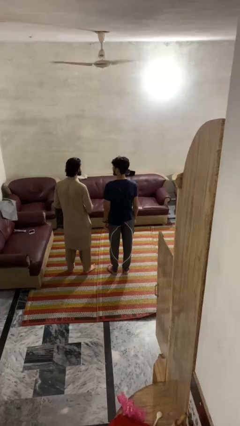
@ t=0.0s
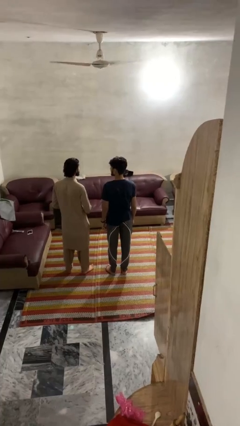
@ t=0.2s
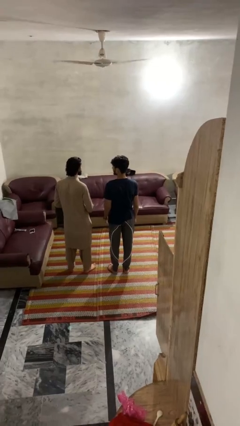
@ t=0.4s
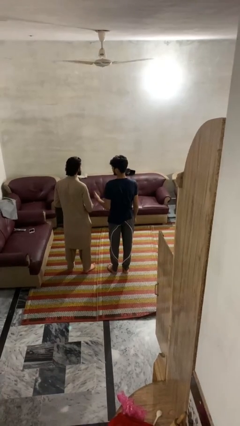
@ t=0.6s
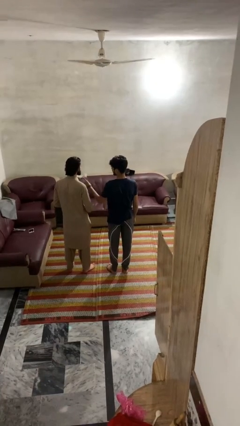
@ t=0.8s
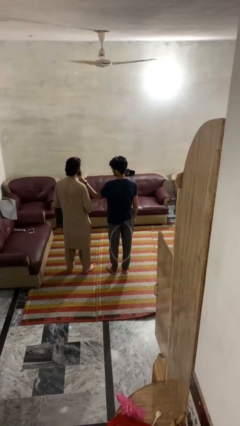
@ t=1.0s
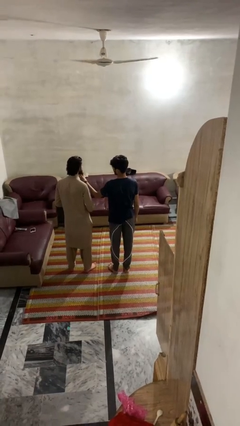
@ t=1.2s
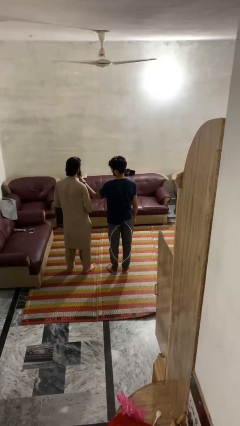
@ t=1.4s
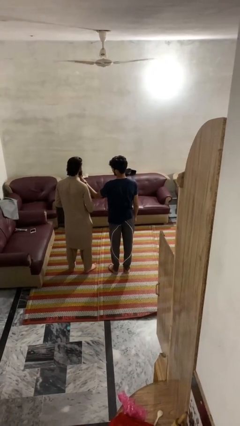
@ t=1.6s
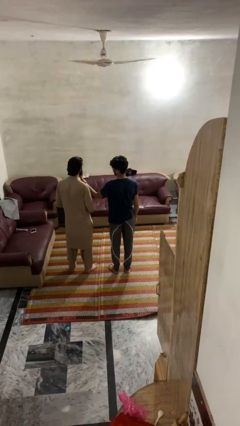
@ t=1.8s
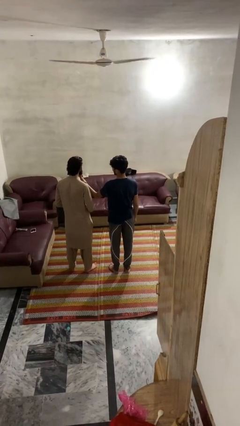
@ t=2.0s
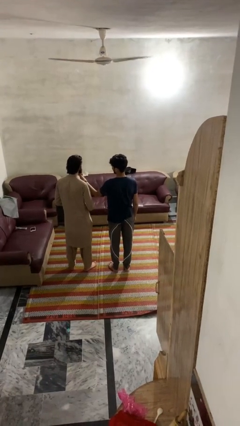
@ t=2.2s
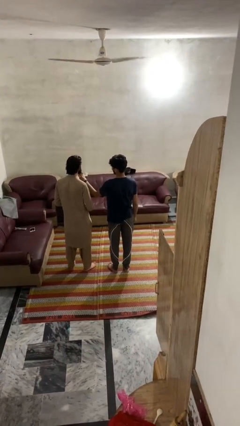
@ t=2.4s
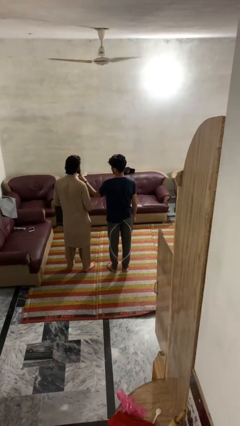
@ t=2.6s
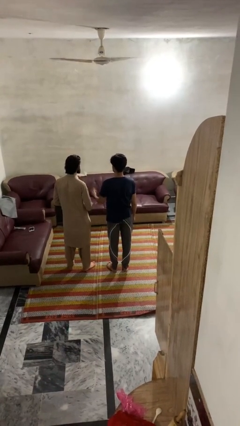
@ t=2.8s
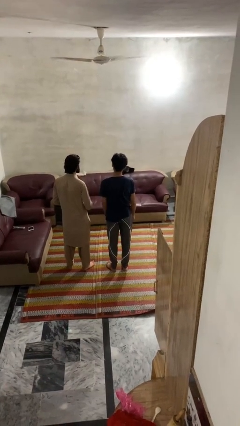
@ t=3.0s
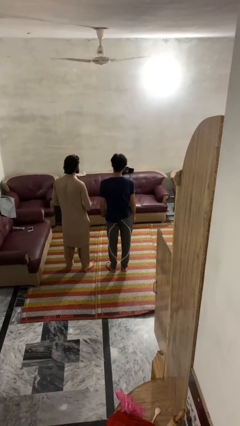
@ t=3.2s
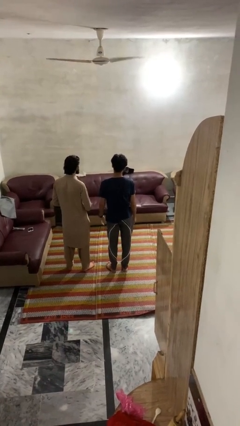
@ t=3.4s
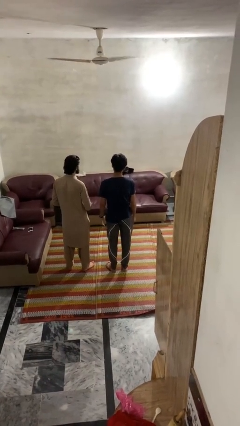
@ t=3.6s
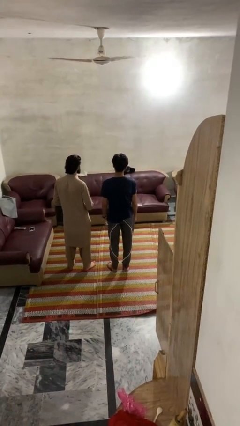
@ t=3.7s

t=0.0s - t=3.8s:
person touches face of person

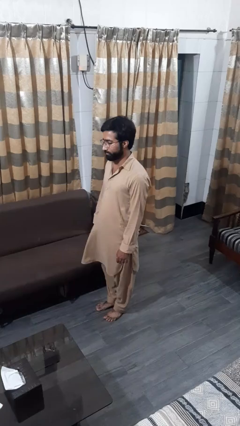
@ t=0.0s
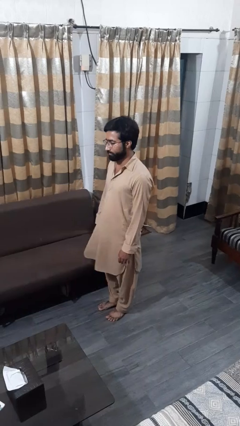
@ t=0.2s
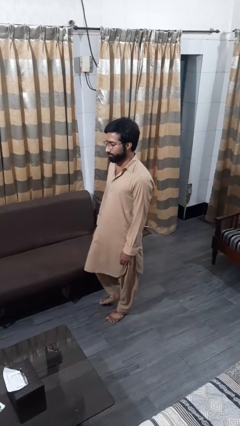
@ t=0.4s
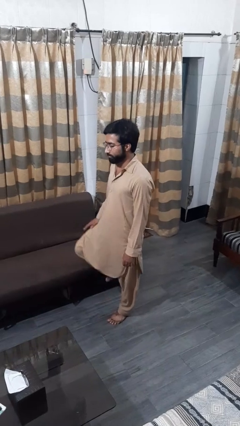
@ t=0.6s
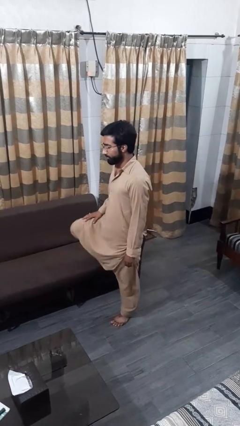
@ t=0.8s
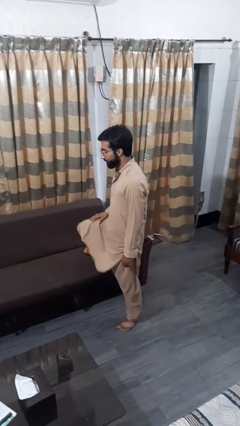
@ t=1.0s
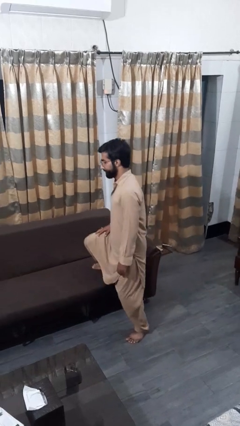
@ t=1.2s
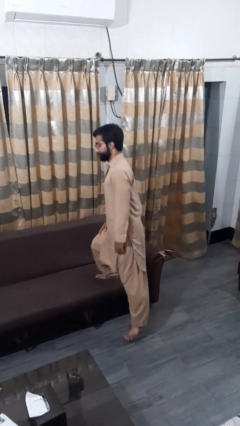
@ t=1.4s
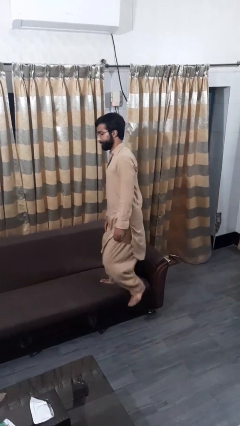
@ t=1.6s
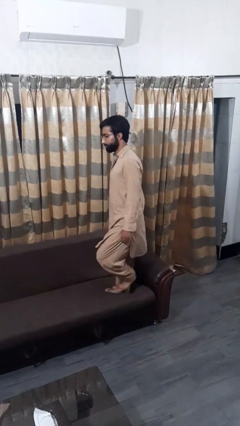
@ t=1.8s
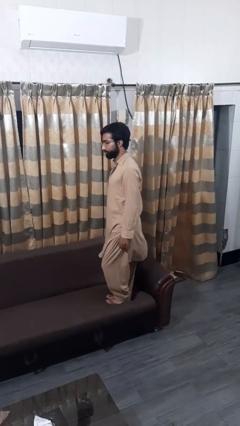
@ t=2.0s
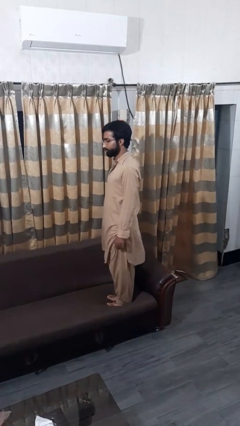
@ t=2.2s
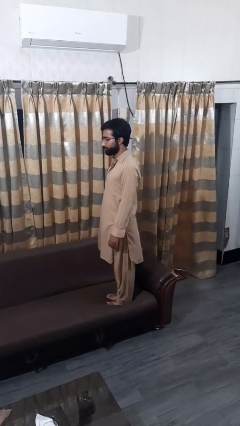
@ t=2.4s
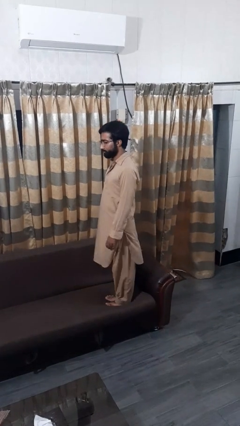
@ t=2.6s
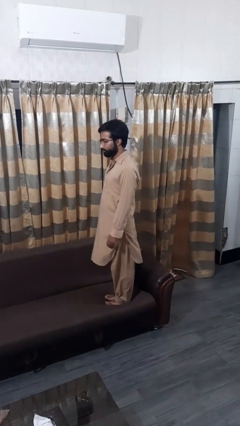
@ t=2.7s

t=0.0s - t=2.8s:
person climbs on couch

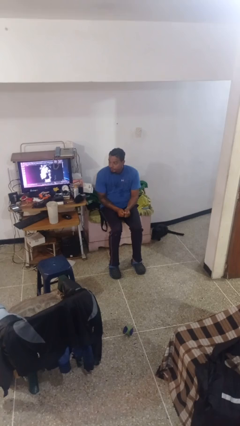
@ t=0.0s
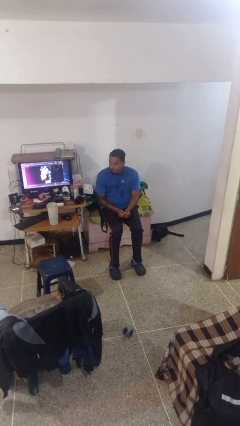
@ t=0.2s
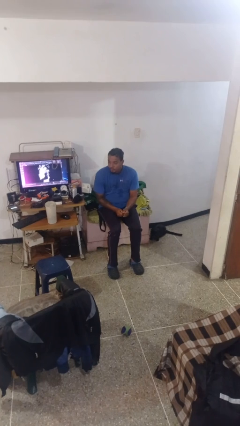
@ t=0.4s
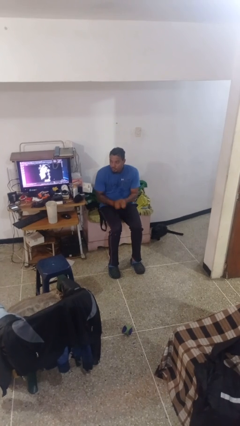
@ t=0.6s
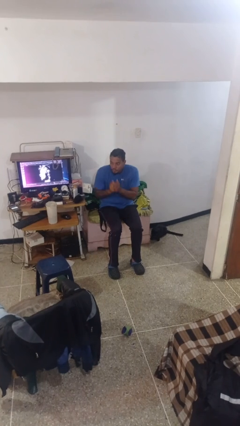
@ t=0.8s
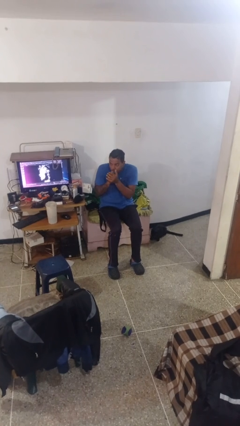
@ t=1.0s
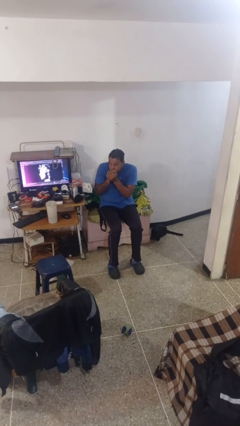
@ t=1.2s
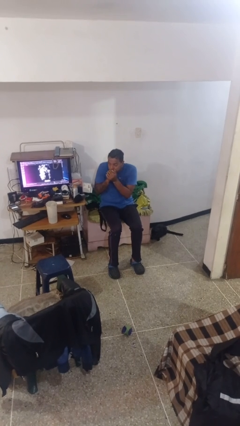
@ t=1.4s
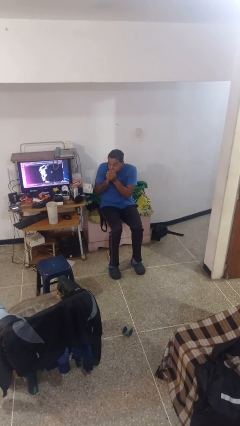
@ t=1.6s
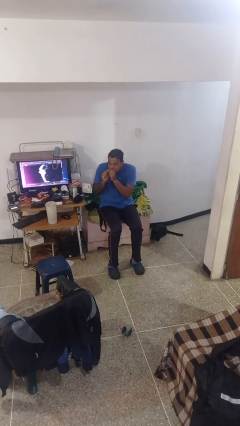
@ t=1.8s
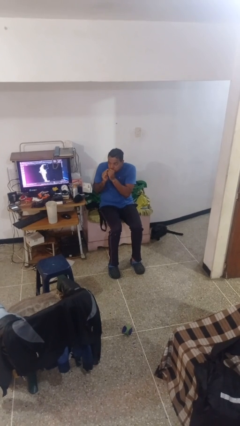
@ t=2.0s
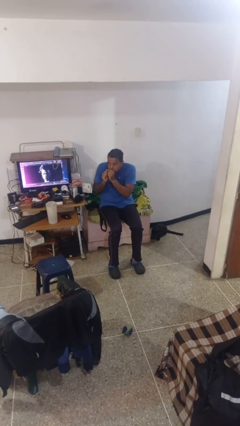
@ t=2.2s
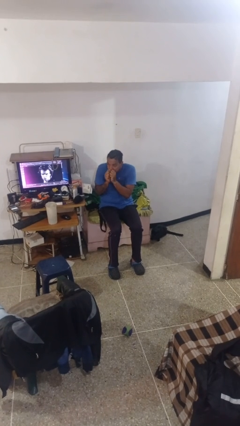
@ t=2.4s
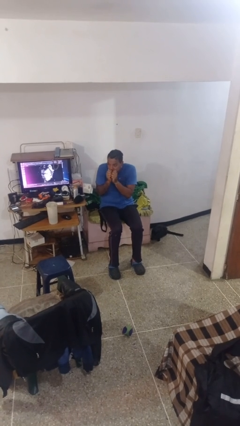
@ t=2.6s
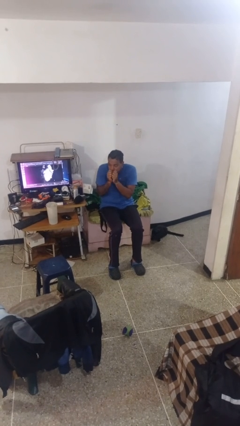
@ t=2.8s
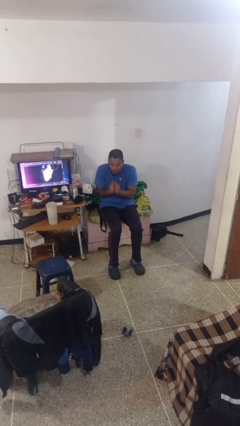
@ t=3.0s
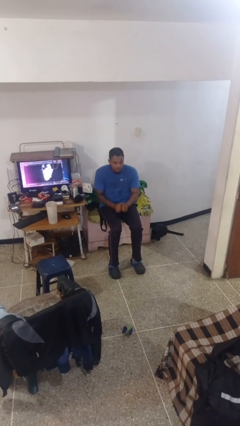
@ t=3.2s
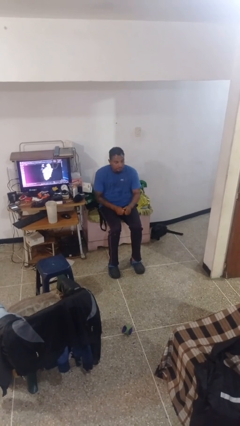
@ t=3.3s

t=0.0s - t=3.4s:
person blows into hands

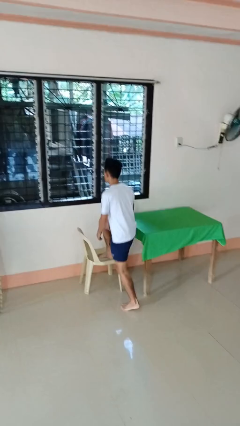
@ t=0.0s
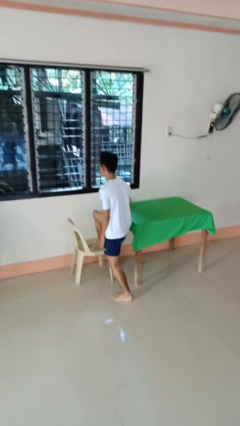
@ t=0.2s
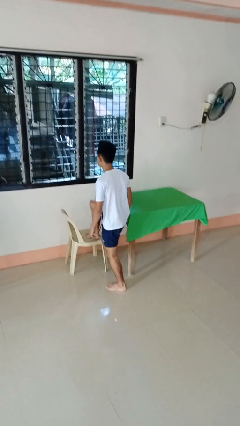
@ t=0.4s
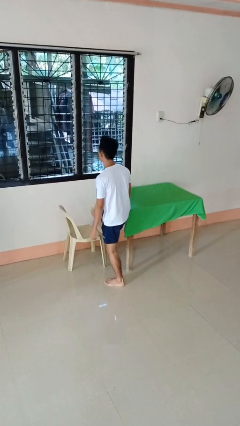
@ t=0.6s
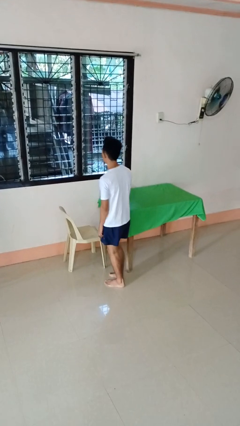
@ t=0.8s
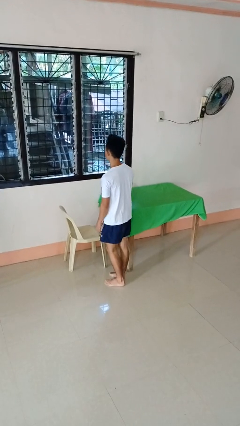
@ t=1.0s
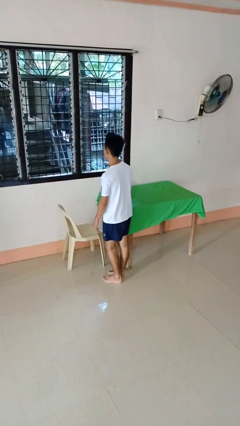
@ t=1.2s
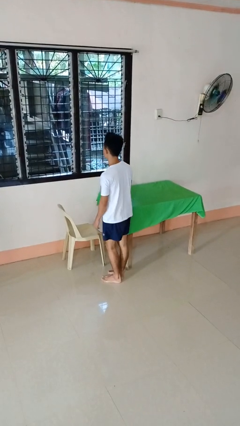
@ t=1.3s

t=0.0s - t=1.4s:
person climbs off chair

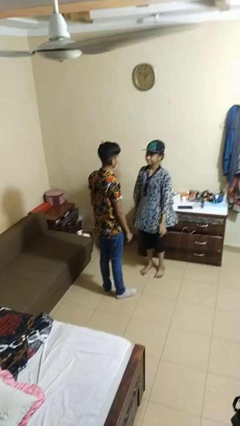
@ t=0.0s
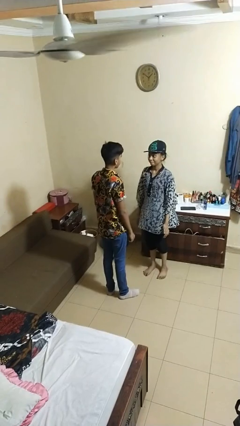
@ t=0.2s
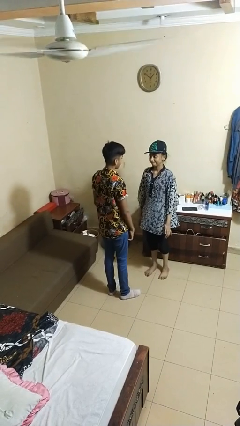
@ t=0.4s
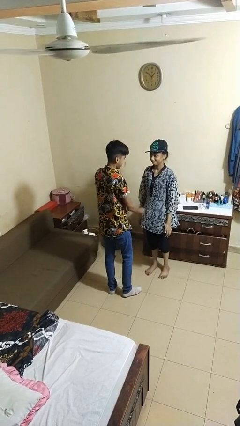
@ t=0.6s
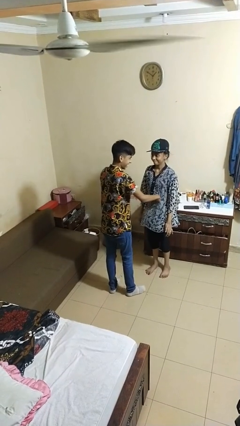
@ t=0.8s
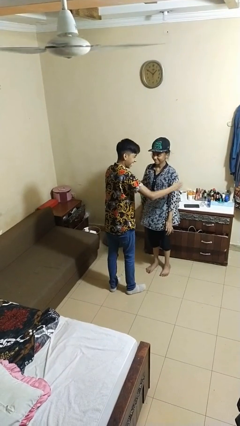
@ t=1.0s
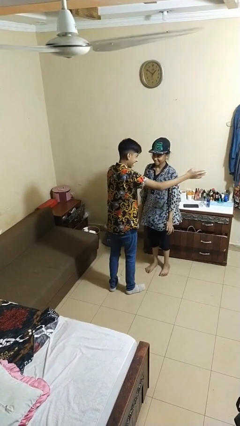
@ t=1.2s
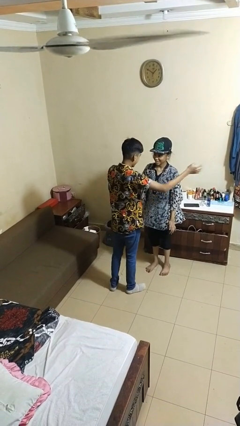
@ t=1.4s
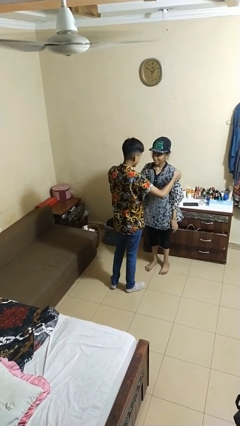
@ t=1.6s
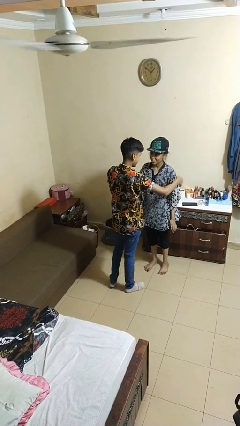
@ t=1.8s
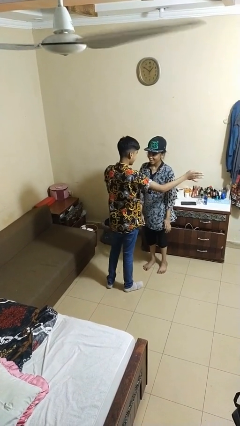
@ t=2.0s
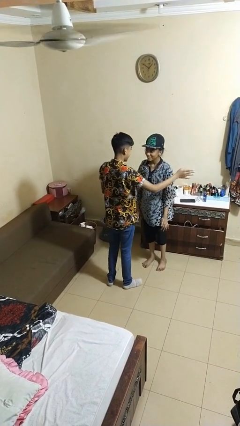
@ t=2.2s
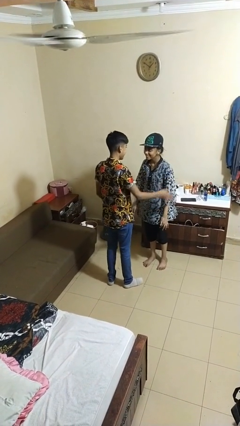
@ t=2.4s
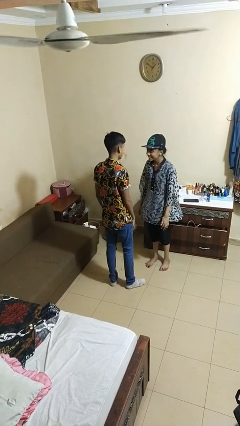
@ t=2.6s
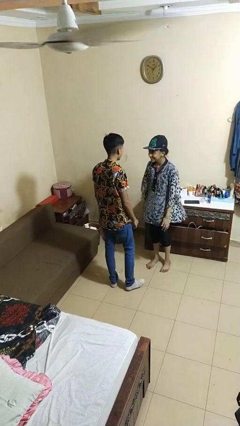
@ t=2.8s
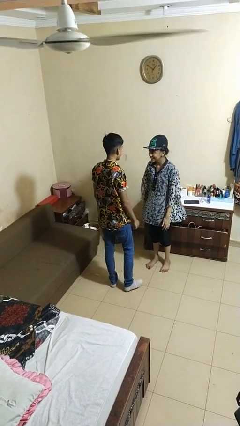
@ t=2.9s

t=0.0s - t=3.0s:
person shoves person

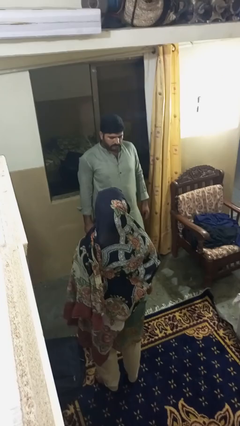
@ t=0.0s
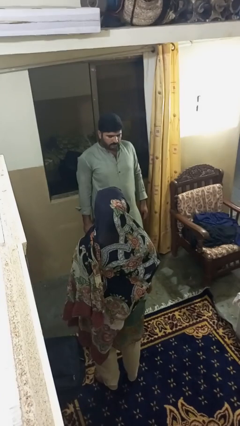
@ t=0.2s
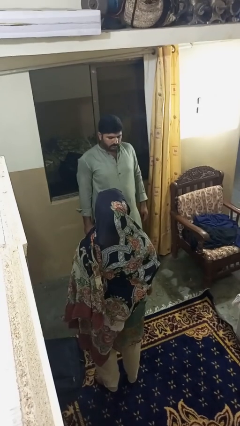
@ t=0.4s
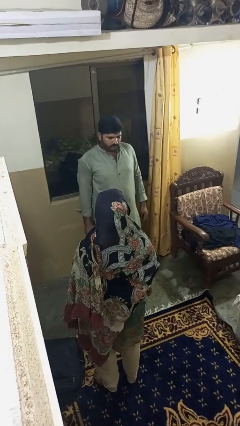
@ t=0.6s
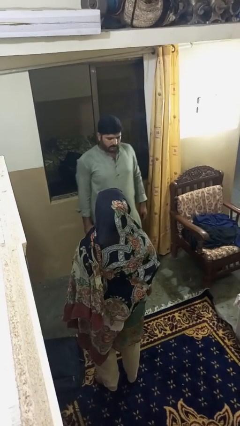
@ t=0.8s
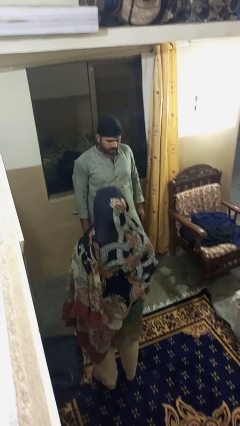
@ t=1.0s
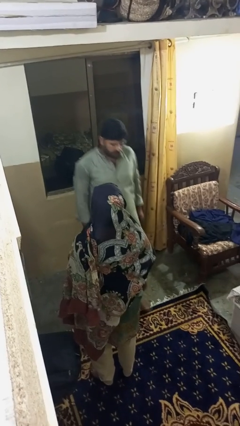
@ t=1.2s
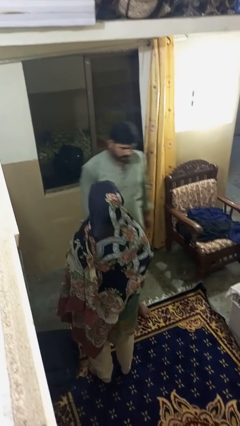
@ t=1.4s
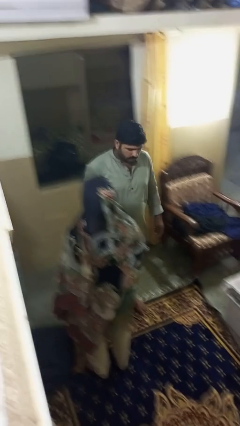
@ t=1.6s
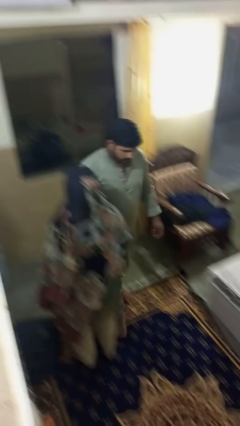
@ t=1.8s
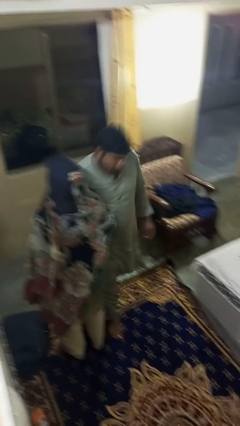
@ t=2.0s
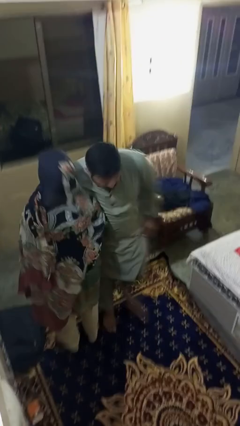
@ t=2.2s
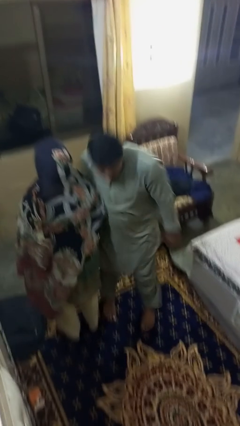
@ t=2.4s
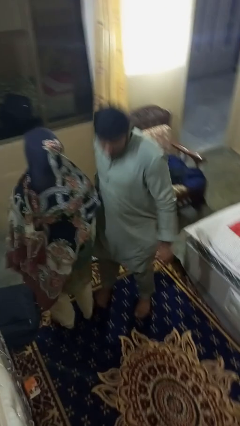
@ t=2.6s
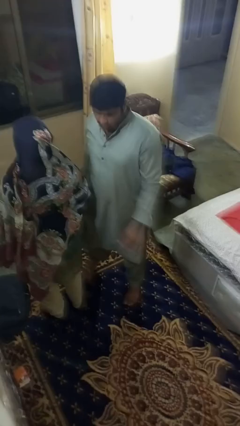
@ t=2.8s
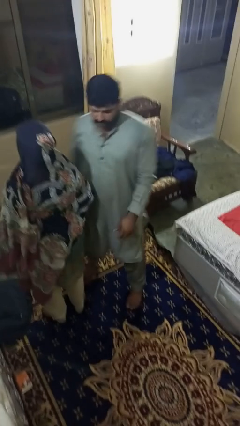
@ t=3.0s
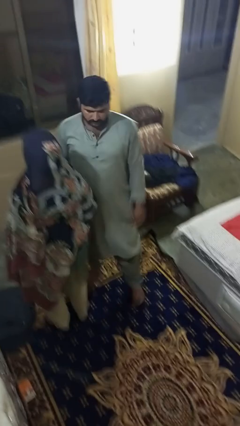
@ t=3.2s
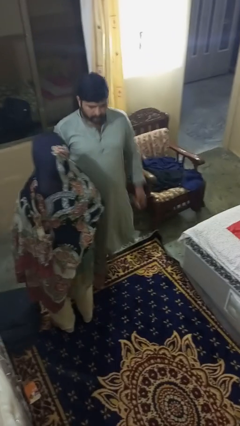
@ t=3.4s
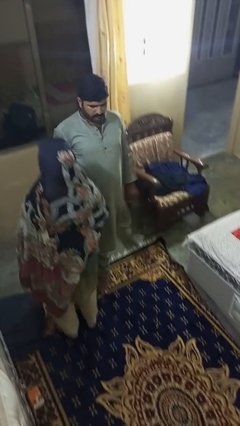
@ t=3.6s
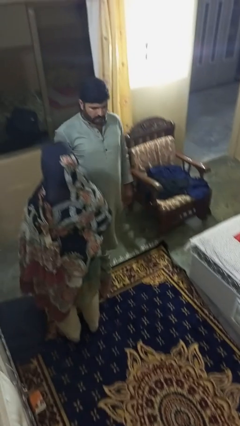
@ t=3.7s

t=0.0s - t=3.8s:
person bumps into person
